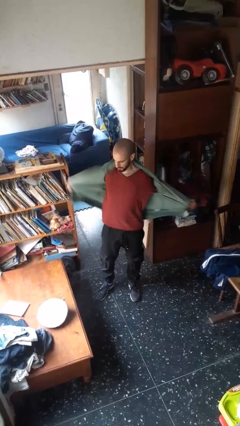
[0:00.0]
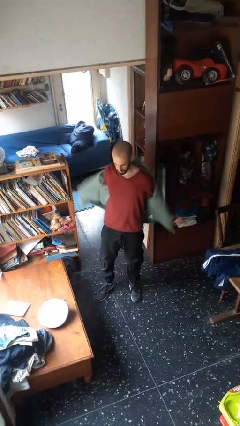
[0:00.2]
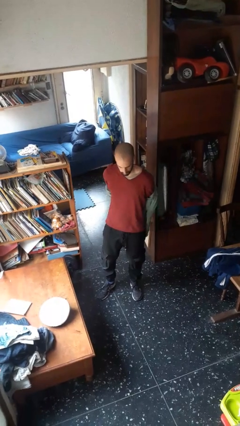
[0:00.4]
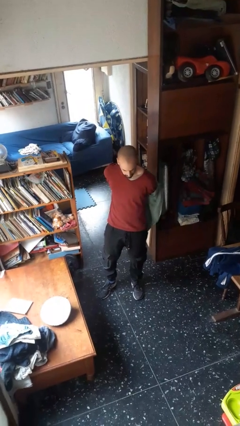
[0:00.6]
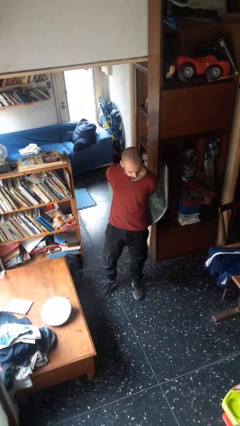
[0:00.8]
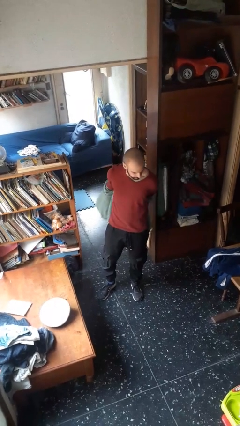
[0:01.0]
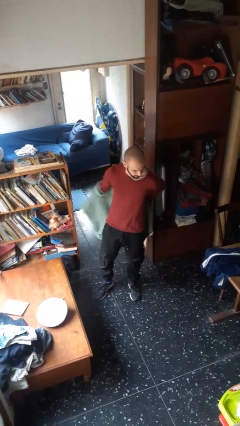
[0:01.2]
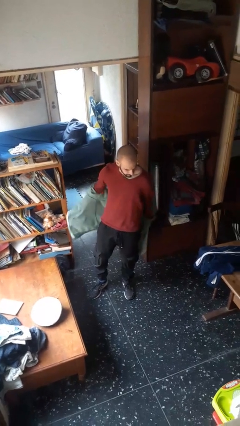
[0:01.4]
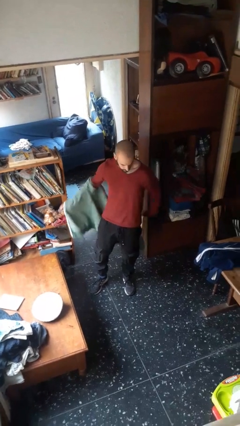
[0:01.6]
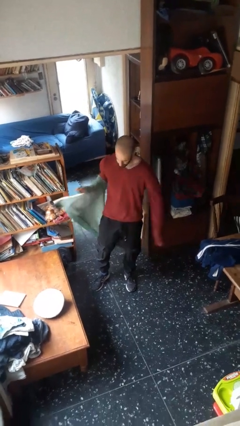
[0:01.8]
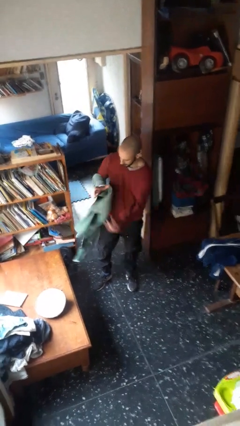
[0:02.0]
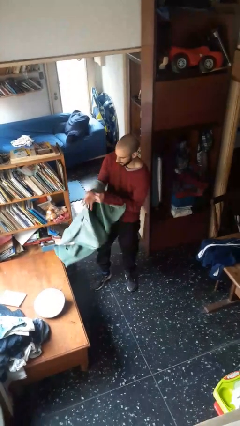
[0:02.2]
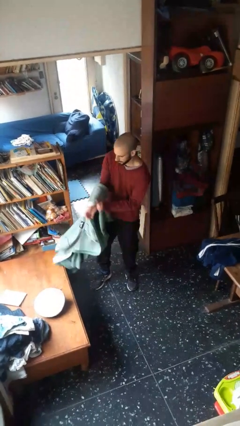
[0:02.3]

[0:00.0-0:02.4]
person takes off jacket

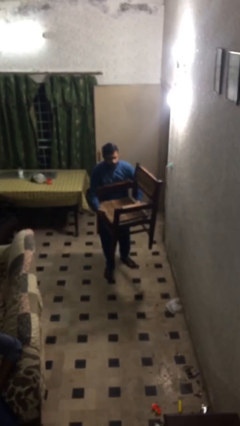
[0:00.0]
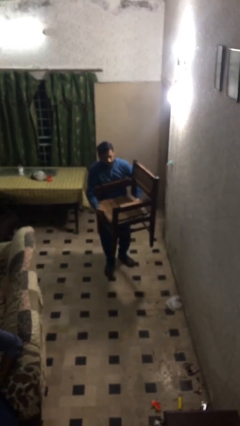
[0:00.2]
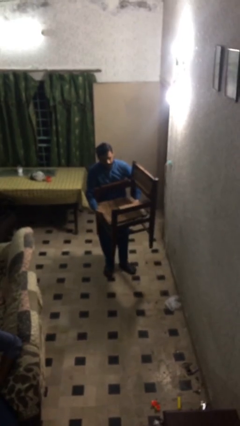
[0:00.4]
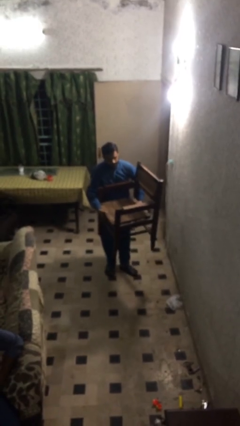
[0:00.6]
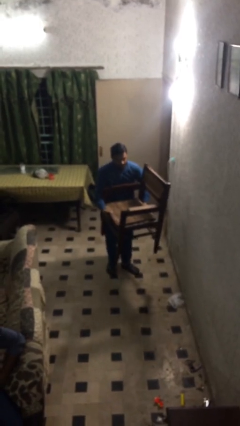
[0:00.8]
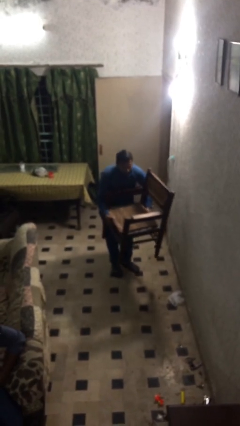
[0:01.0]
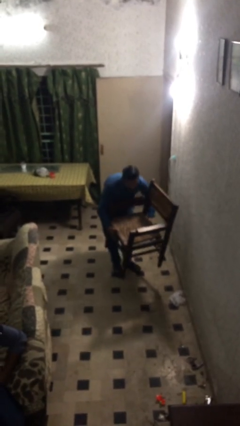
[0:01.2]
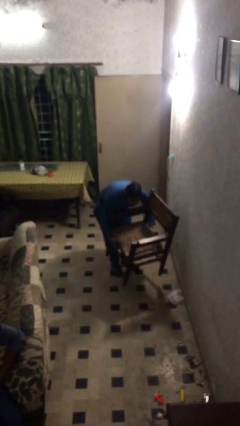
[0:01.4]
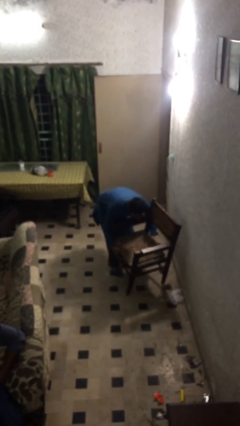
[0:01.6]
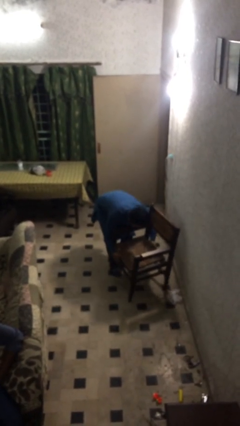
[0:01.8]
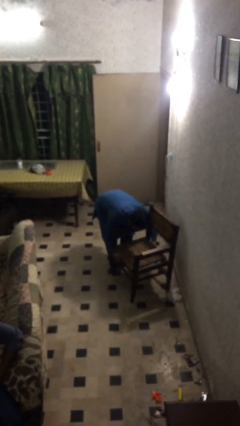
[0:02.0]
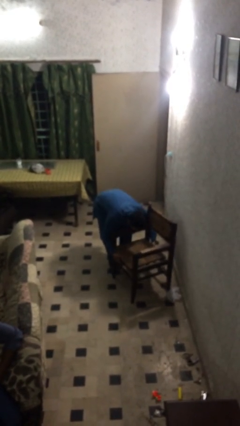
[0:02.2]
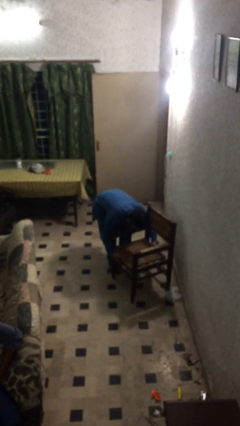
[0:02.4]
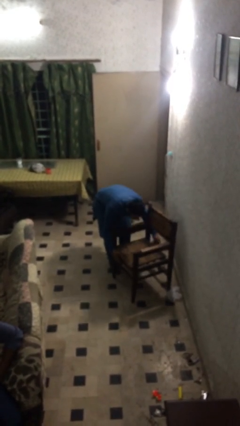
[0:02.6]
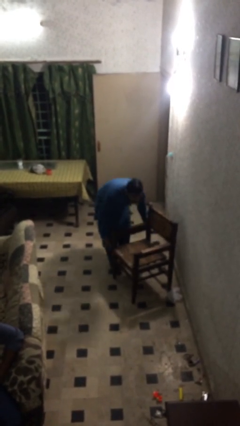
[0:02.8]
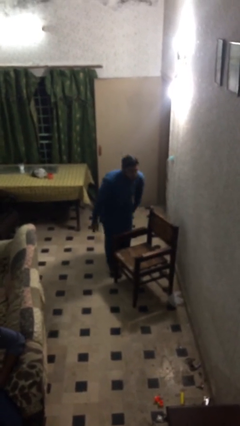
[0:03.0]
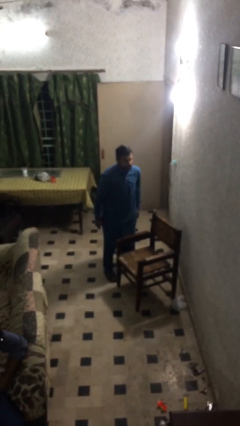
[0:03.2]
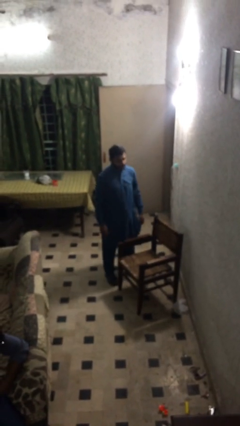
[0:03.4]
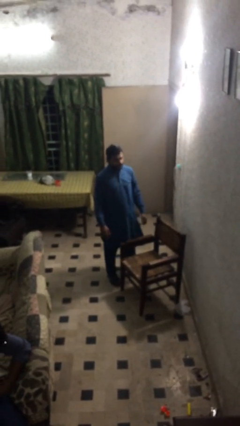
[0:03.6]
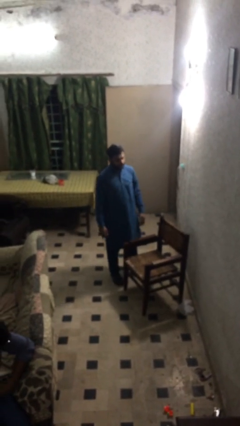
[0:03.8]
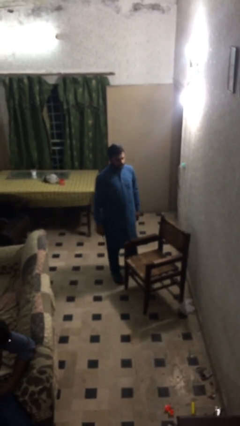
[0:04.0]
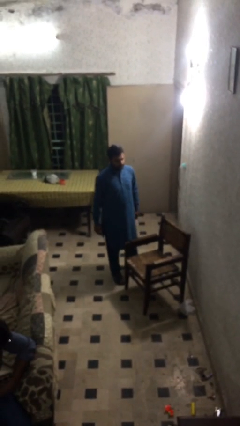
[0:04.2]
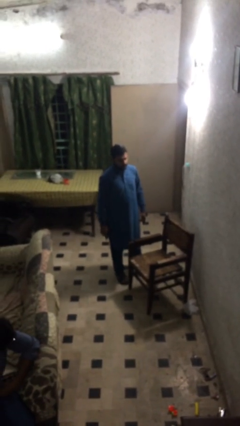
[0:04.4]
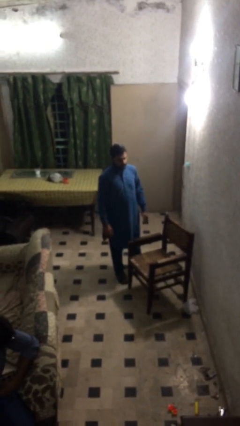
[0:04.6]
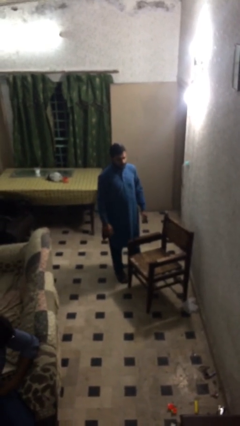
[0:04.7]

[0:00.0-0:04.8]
person puts down object on floor

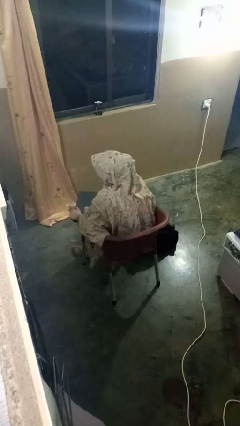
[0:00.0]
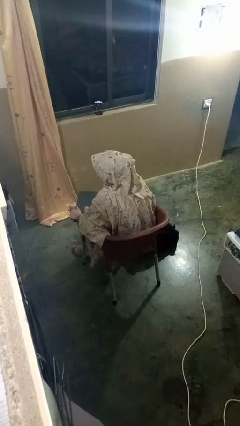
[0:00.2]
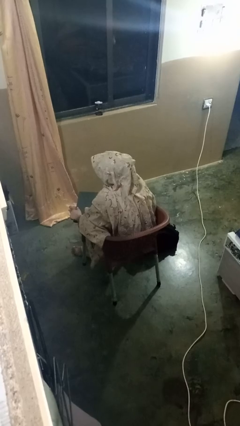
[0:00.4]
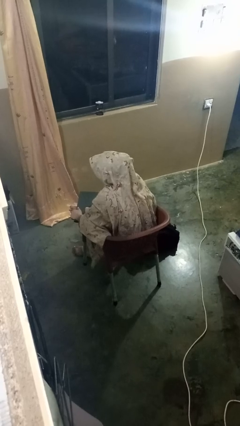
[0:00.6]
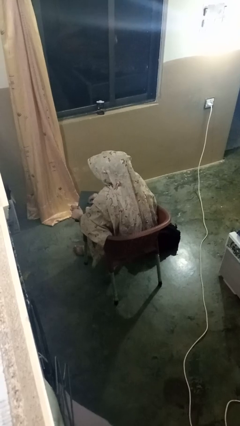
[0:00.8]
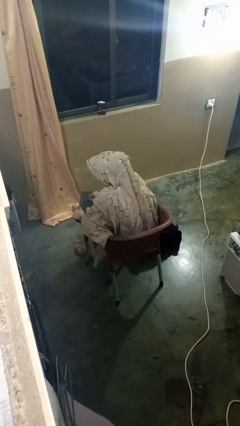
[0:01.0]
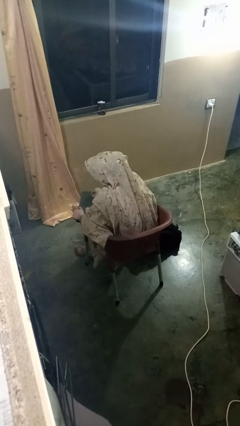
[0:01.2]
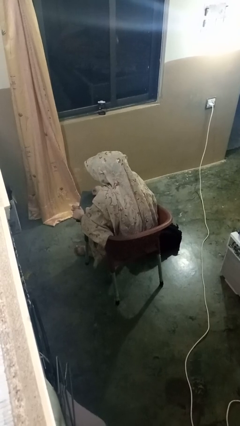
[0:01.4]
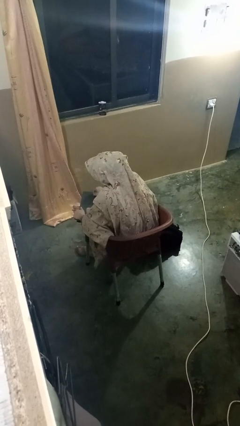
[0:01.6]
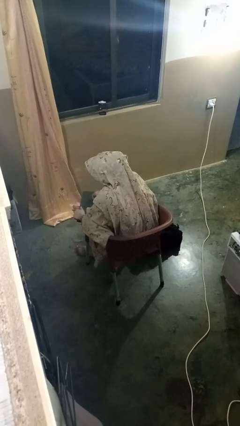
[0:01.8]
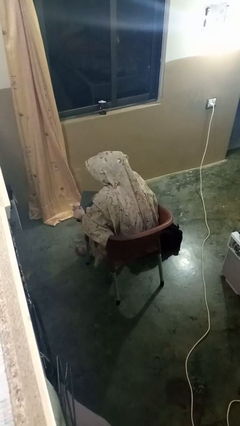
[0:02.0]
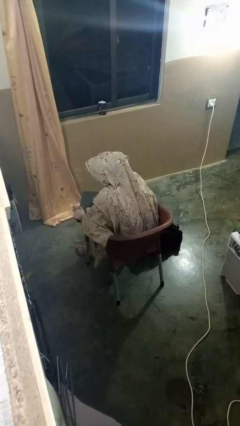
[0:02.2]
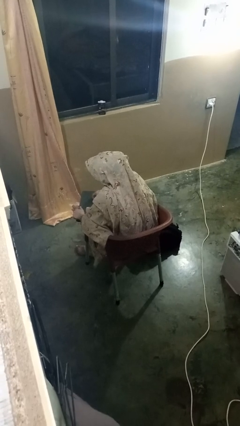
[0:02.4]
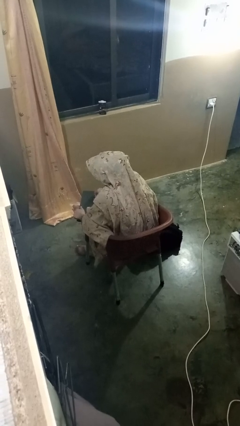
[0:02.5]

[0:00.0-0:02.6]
person interacts with tablet

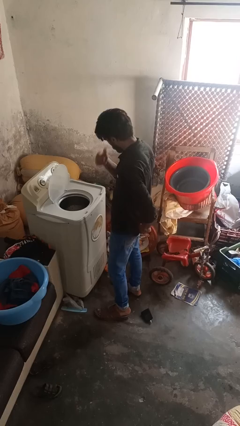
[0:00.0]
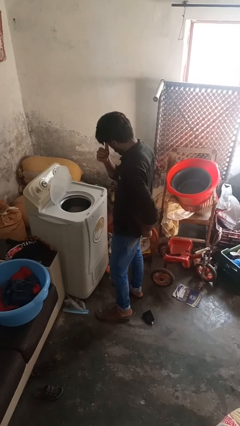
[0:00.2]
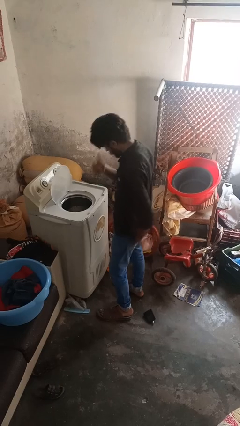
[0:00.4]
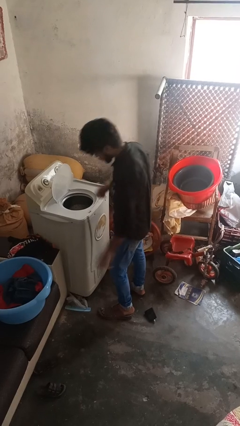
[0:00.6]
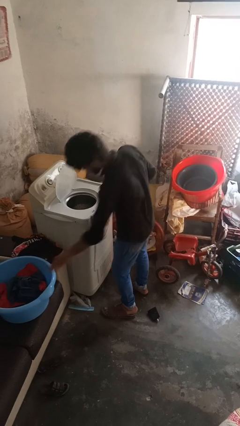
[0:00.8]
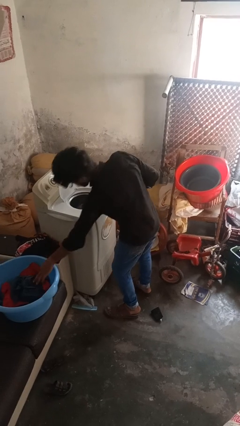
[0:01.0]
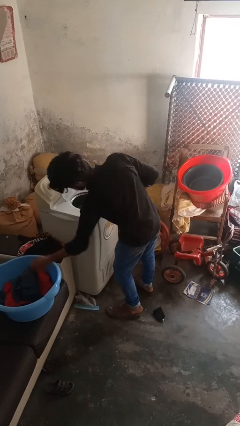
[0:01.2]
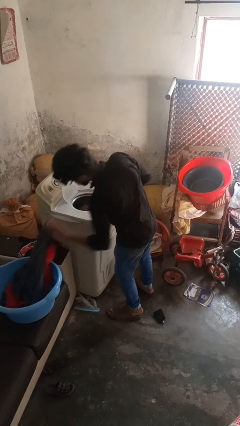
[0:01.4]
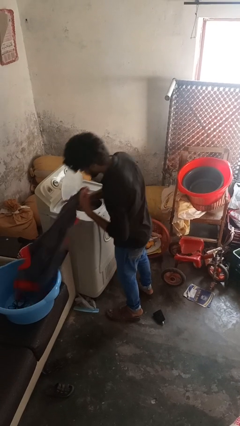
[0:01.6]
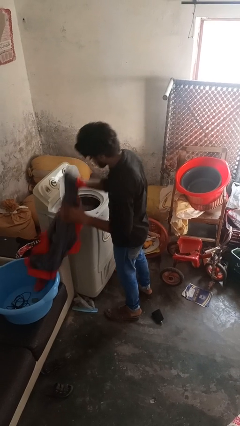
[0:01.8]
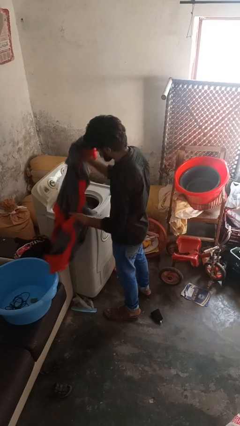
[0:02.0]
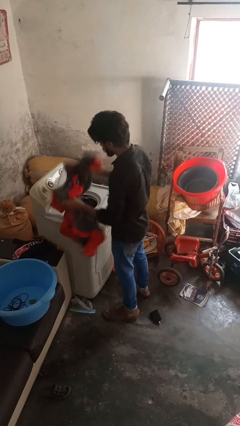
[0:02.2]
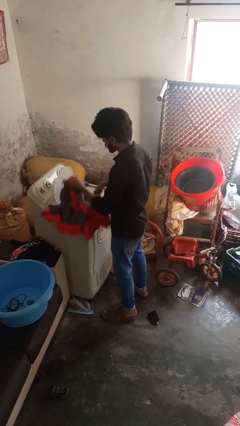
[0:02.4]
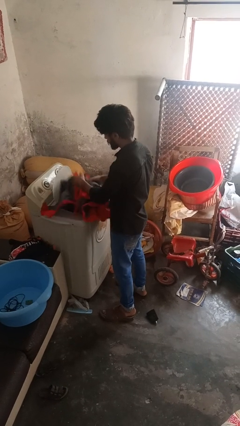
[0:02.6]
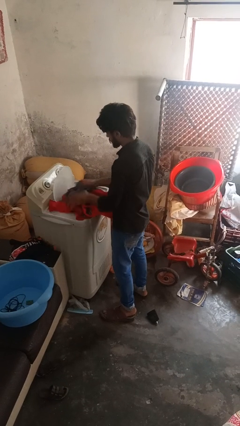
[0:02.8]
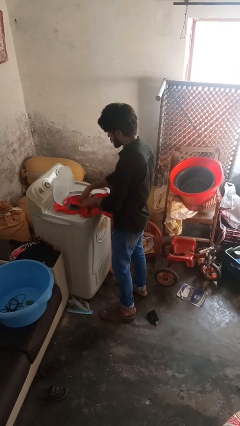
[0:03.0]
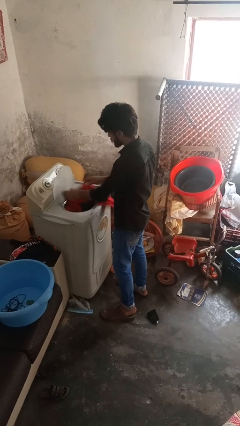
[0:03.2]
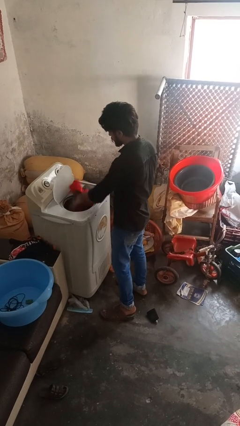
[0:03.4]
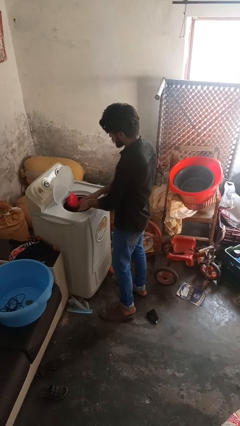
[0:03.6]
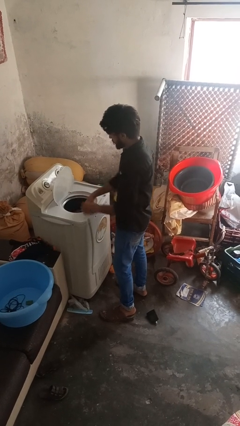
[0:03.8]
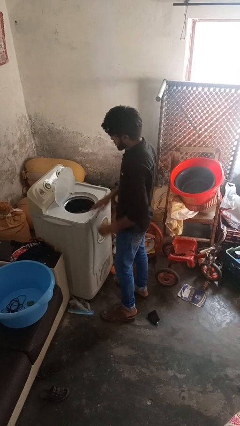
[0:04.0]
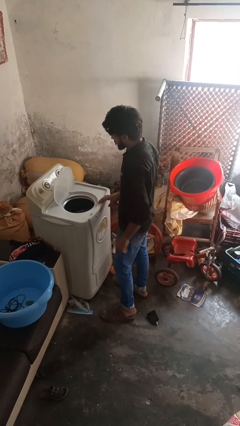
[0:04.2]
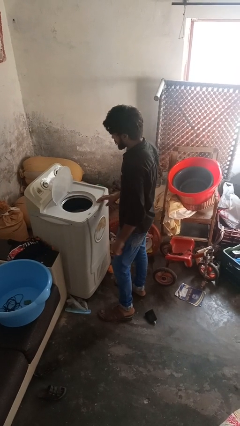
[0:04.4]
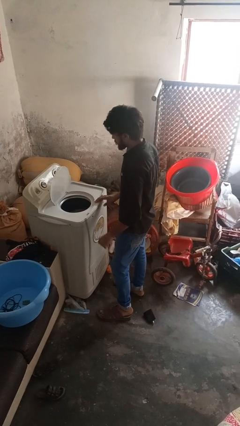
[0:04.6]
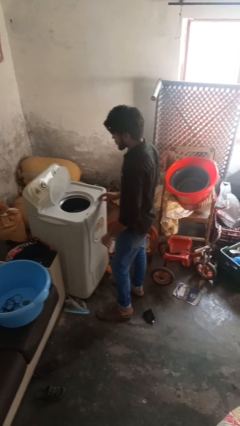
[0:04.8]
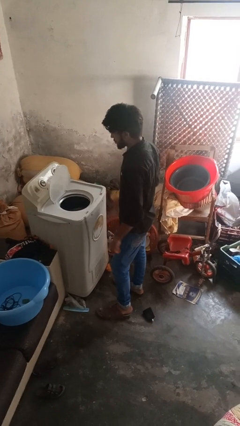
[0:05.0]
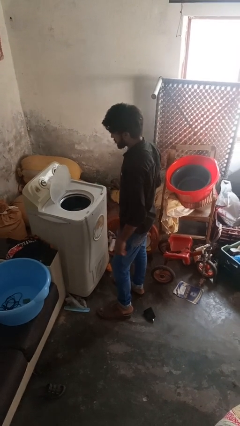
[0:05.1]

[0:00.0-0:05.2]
person loads clotheswasher

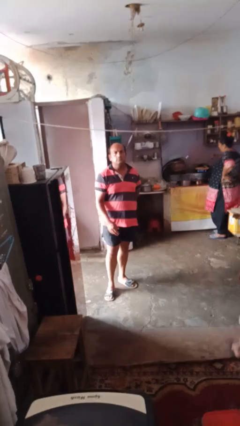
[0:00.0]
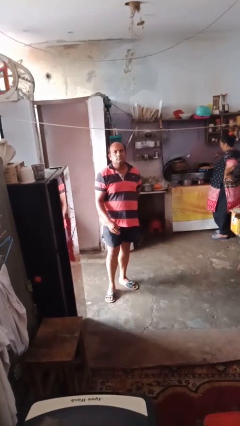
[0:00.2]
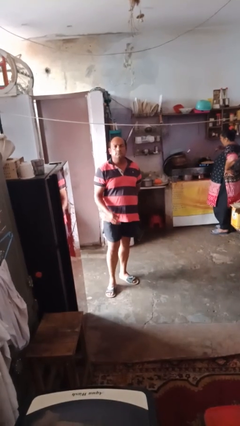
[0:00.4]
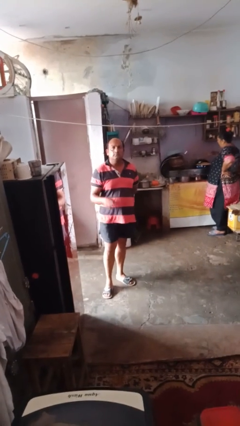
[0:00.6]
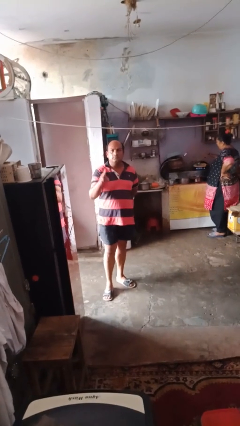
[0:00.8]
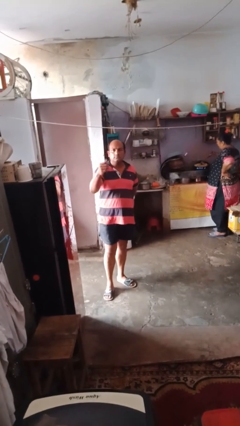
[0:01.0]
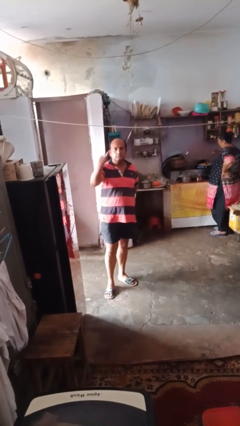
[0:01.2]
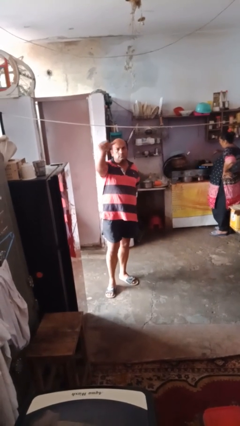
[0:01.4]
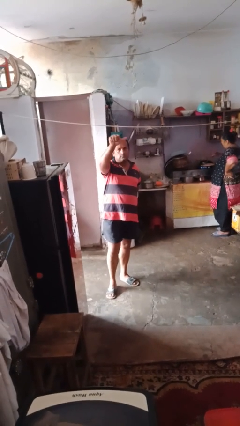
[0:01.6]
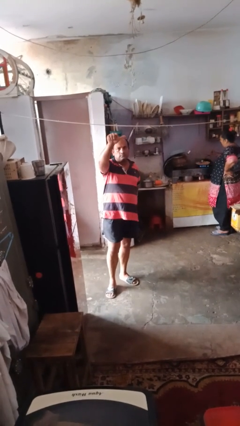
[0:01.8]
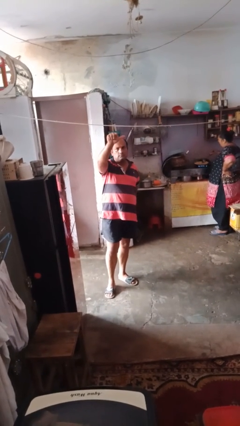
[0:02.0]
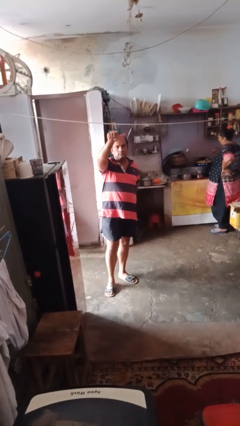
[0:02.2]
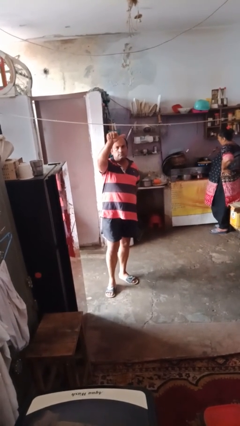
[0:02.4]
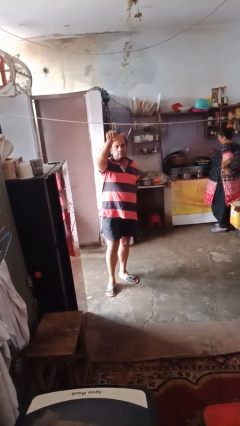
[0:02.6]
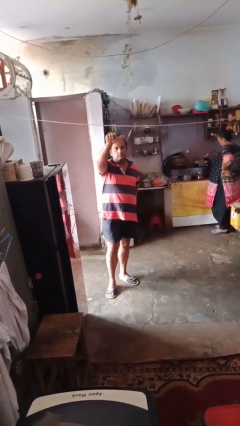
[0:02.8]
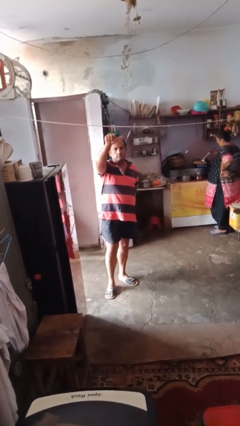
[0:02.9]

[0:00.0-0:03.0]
person gestures behind me
